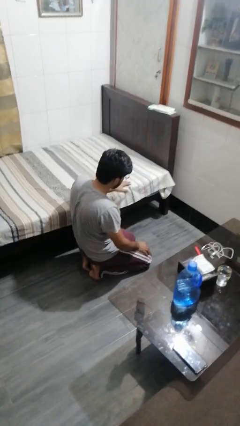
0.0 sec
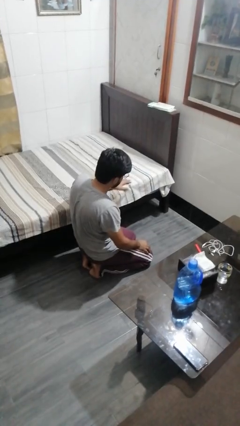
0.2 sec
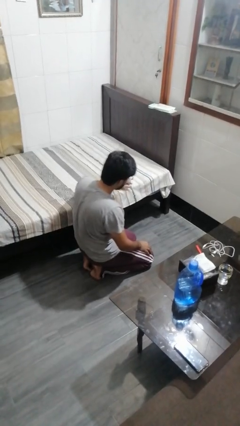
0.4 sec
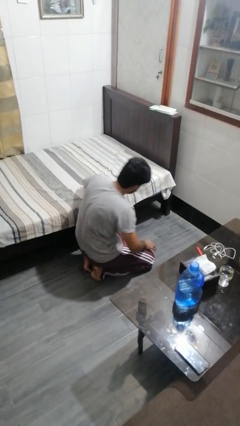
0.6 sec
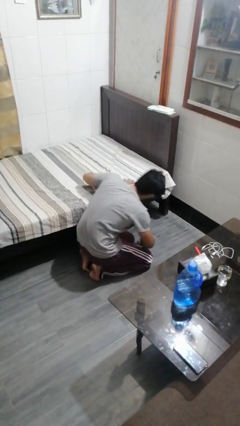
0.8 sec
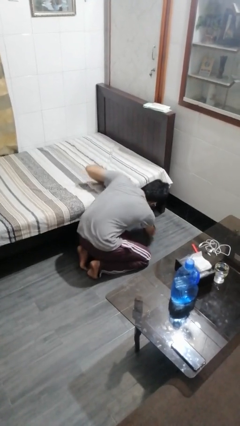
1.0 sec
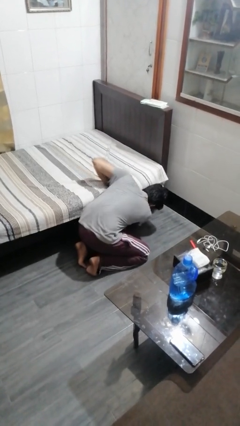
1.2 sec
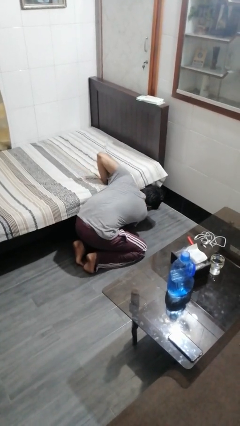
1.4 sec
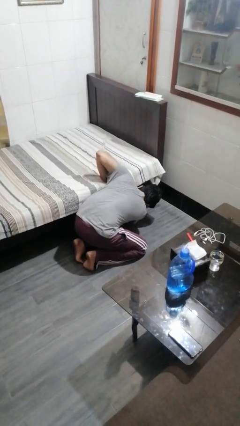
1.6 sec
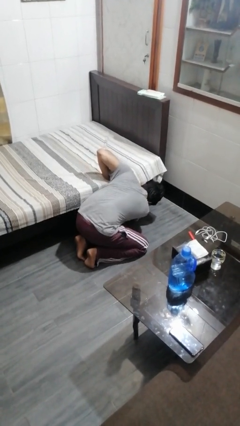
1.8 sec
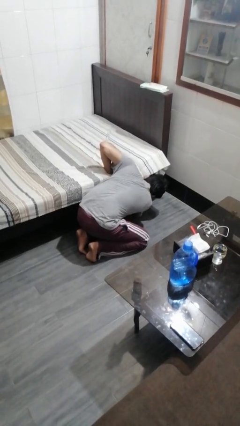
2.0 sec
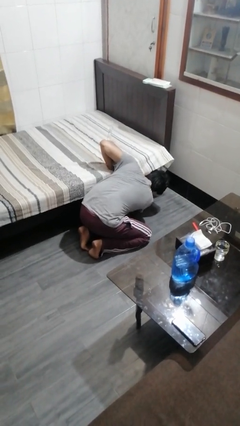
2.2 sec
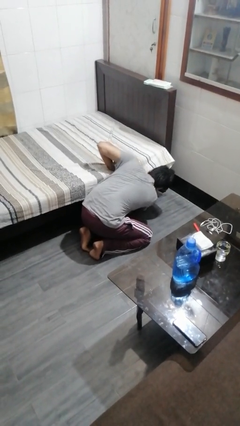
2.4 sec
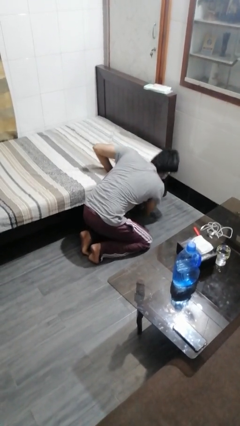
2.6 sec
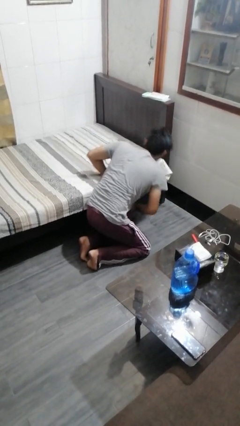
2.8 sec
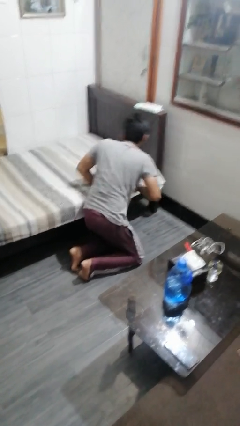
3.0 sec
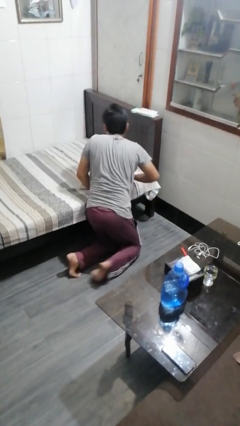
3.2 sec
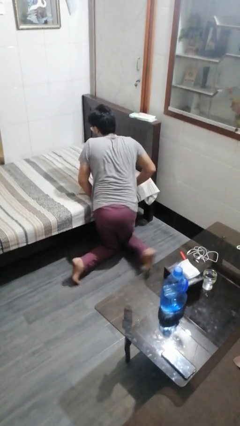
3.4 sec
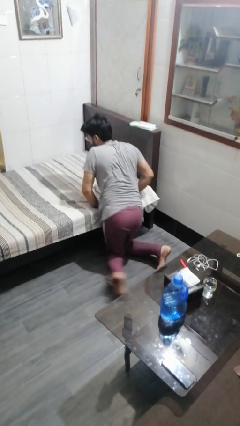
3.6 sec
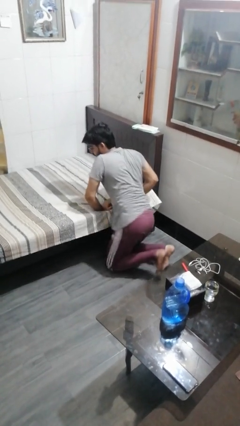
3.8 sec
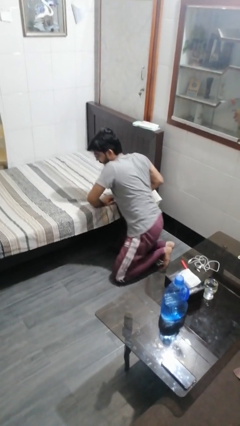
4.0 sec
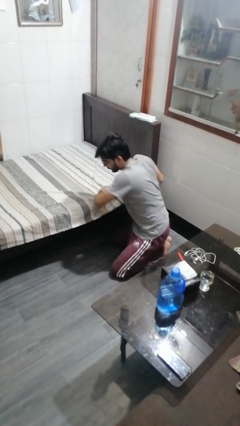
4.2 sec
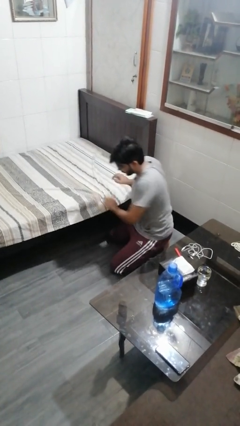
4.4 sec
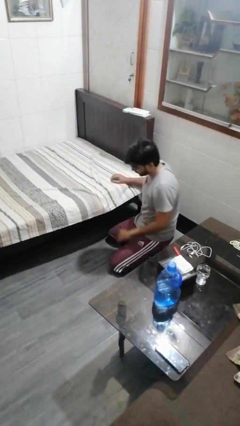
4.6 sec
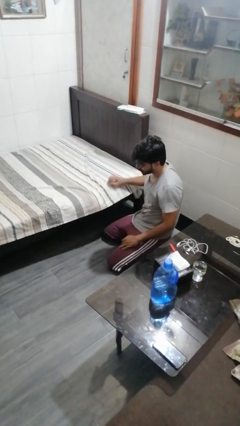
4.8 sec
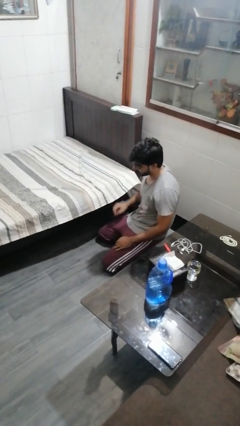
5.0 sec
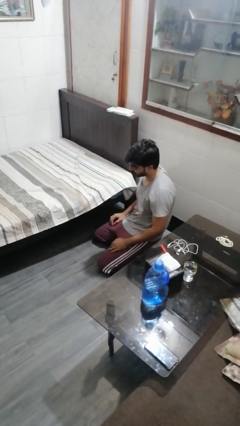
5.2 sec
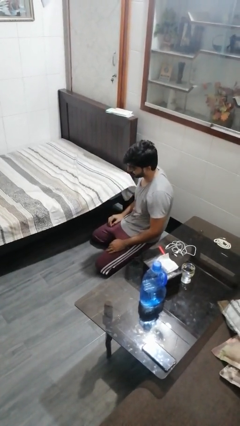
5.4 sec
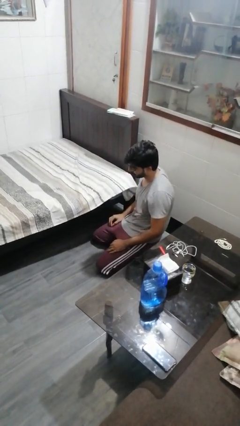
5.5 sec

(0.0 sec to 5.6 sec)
person searches under bed

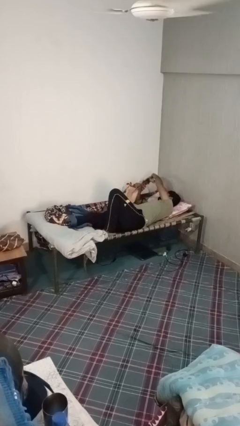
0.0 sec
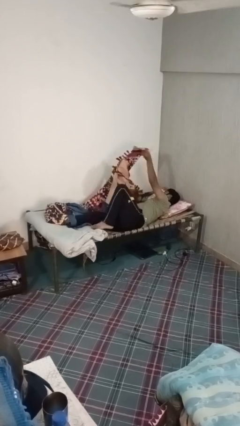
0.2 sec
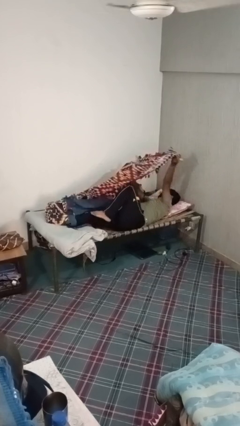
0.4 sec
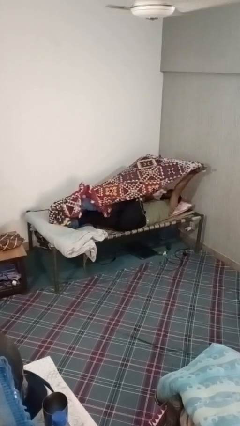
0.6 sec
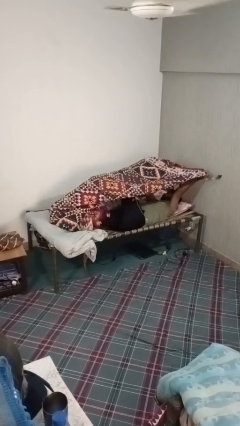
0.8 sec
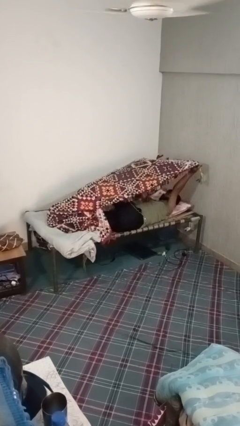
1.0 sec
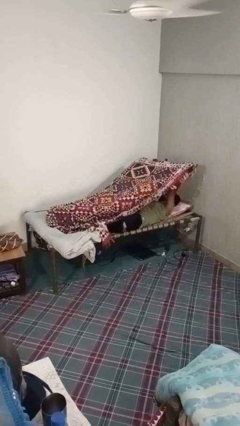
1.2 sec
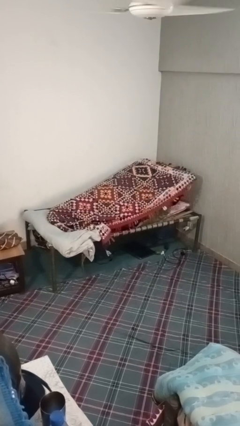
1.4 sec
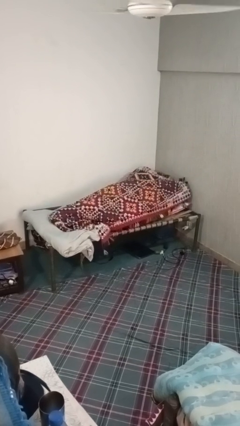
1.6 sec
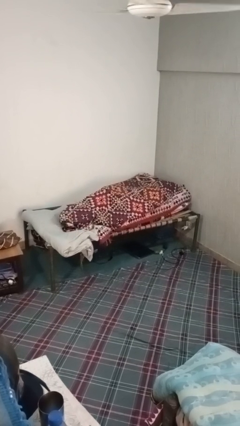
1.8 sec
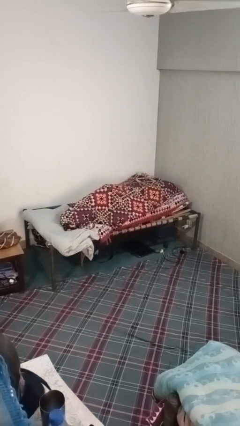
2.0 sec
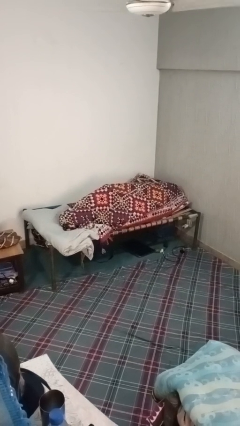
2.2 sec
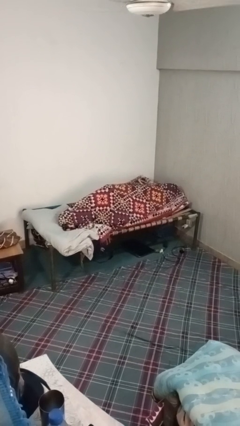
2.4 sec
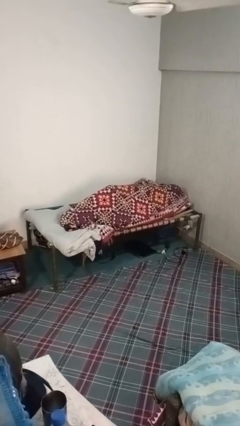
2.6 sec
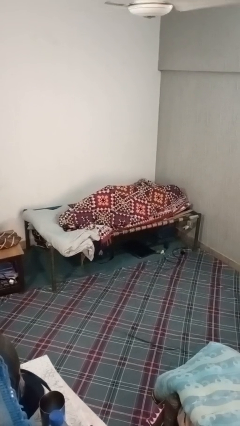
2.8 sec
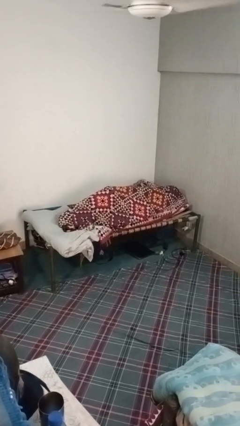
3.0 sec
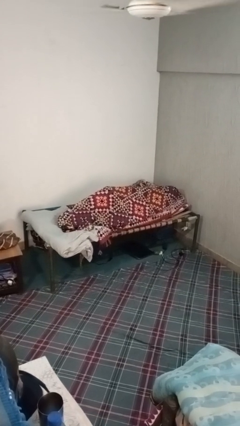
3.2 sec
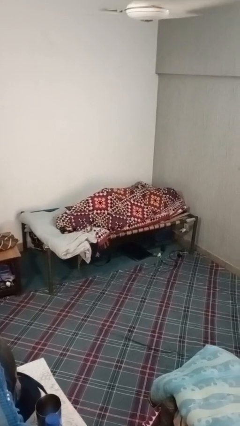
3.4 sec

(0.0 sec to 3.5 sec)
person covers with blanket

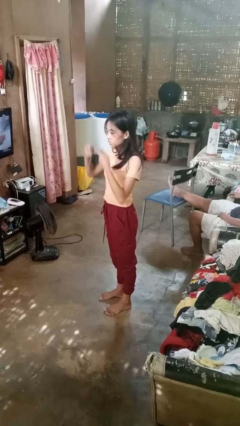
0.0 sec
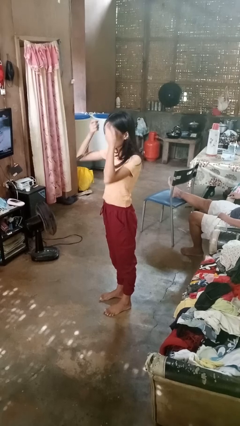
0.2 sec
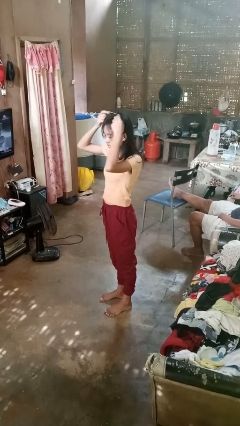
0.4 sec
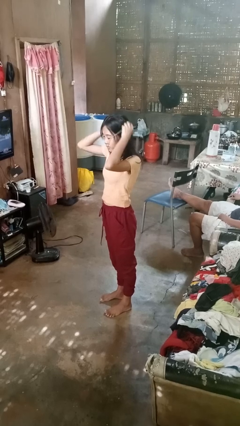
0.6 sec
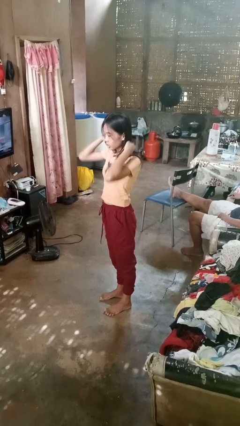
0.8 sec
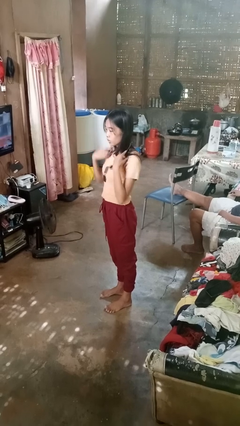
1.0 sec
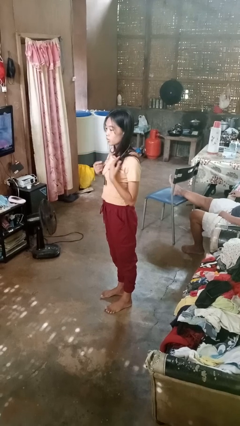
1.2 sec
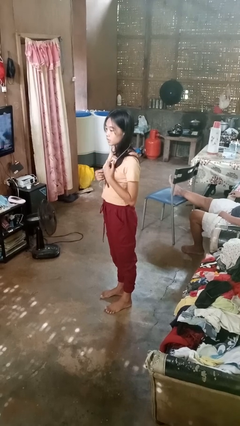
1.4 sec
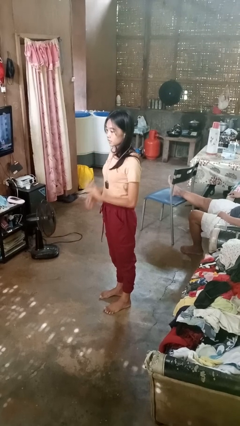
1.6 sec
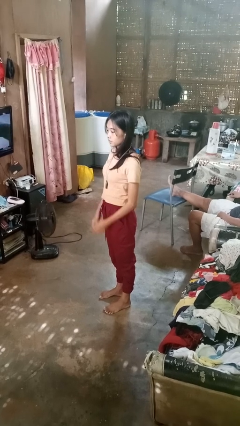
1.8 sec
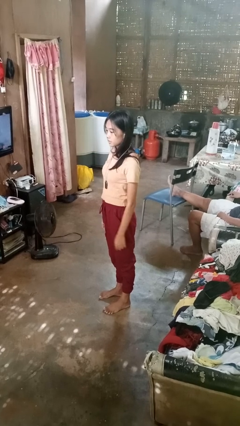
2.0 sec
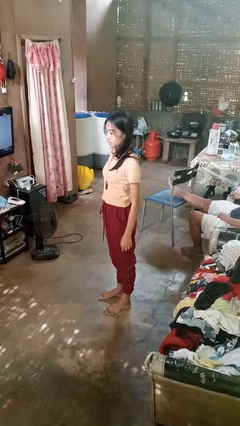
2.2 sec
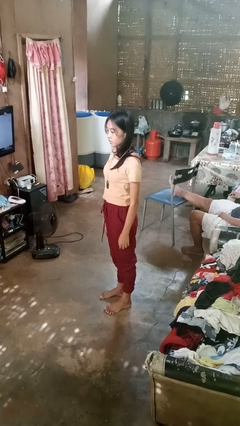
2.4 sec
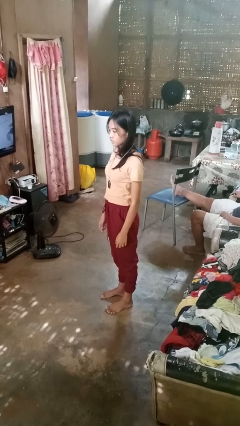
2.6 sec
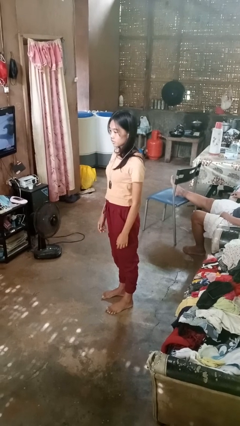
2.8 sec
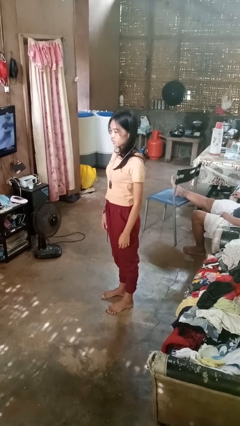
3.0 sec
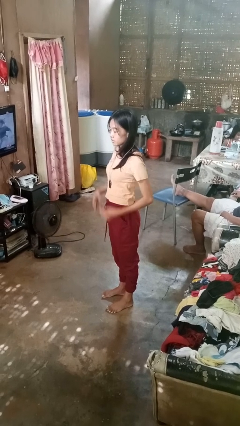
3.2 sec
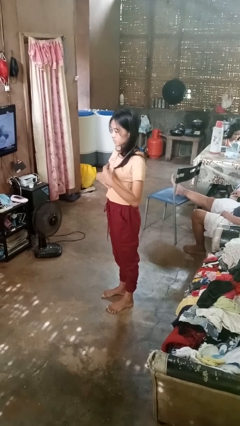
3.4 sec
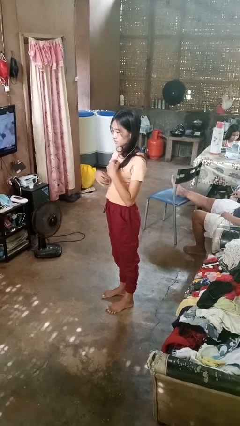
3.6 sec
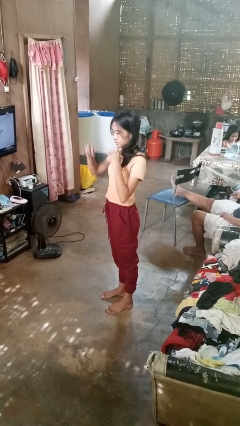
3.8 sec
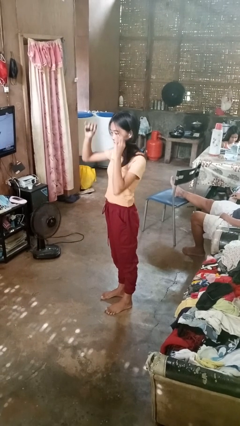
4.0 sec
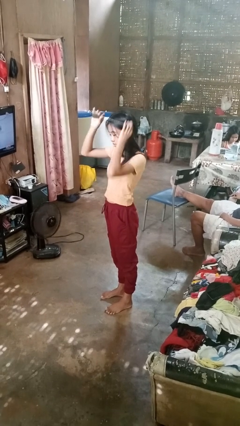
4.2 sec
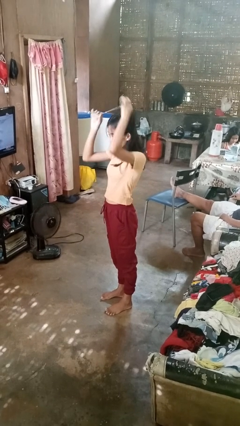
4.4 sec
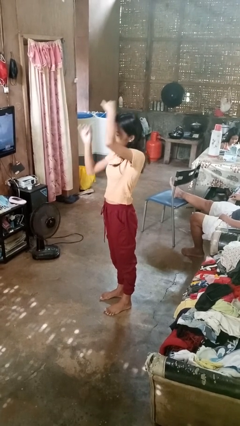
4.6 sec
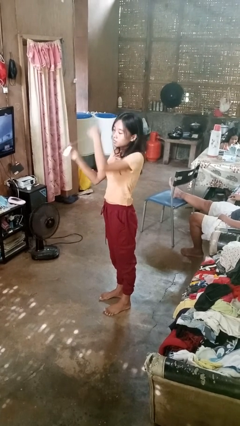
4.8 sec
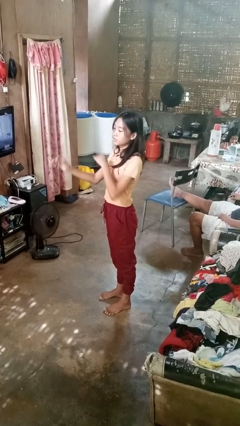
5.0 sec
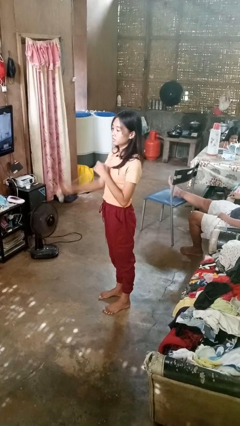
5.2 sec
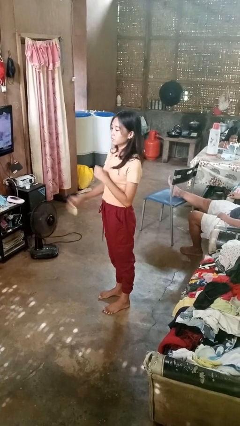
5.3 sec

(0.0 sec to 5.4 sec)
person puts on belt

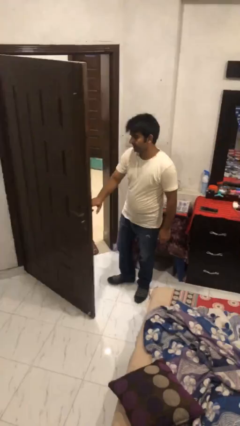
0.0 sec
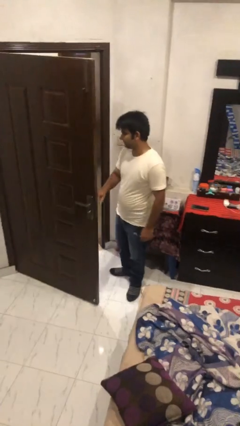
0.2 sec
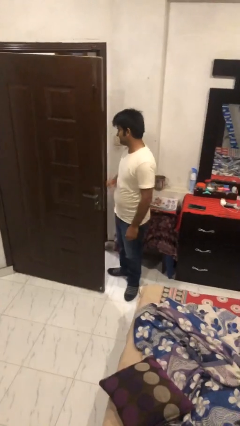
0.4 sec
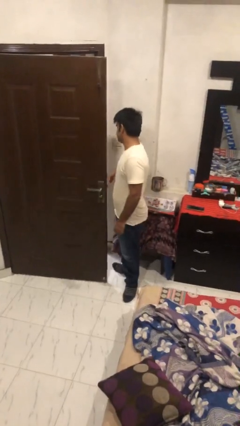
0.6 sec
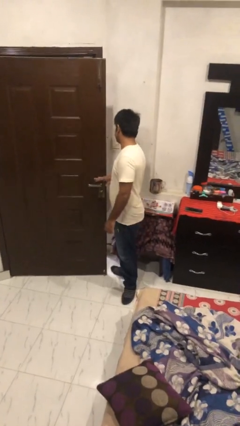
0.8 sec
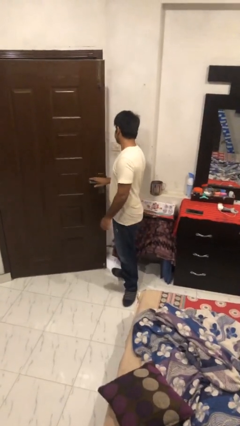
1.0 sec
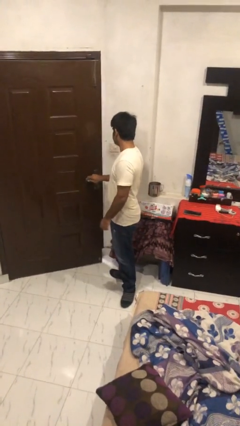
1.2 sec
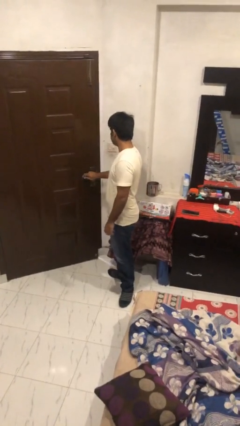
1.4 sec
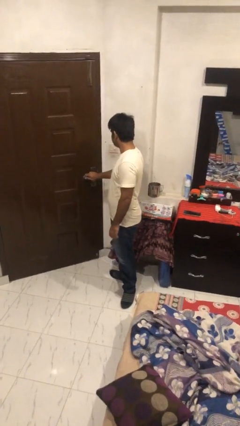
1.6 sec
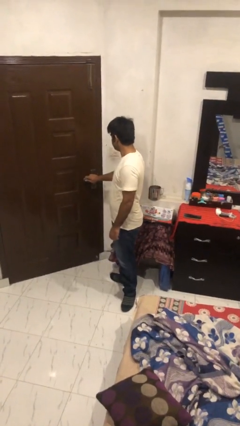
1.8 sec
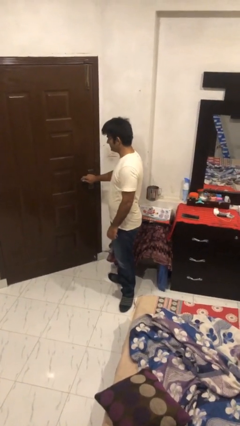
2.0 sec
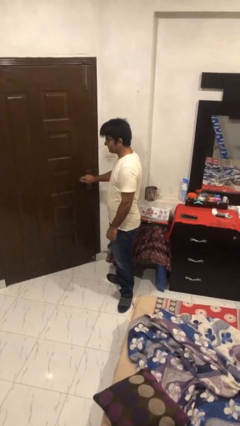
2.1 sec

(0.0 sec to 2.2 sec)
person closes facility door

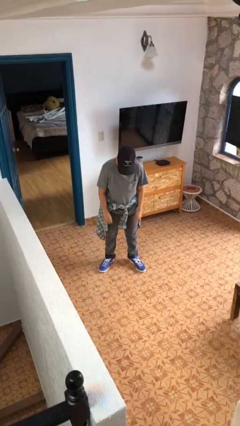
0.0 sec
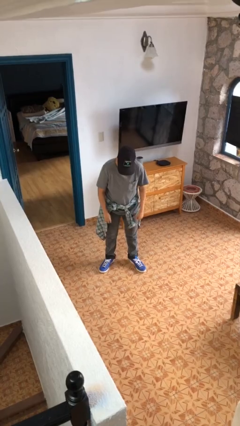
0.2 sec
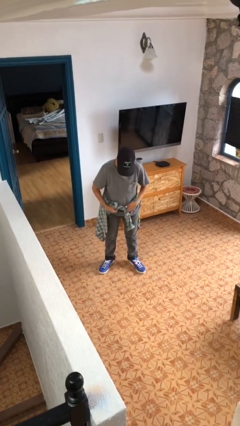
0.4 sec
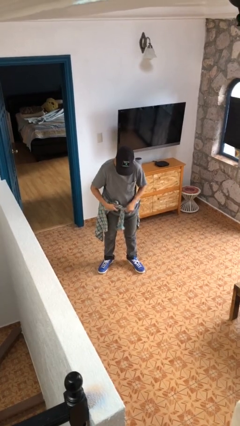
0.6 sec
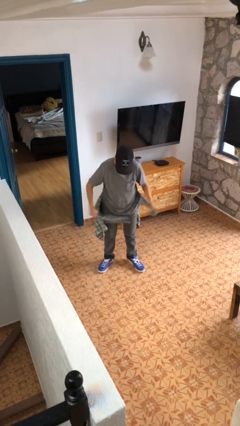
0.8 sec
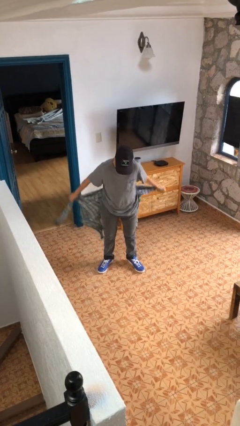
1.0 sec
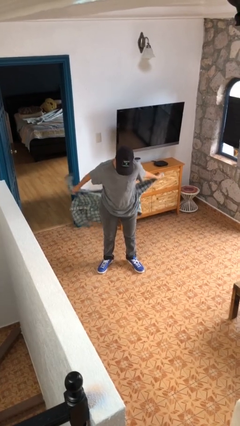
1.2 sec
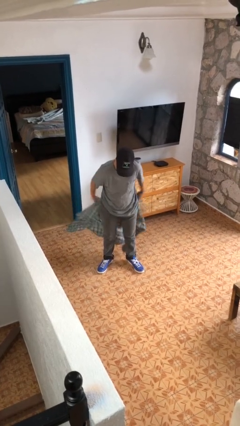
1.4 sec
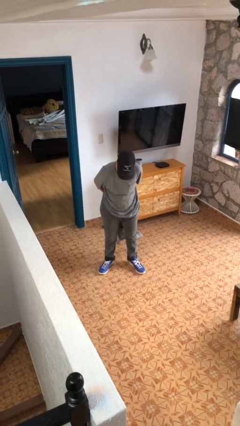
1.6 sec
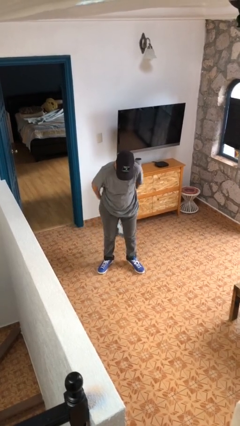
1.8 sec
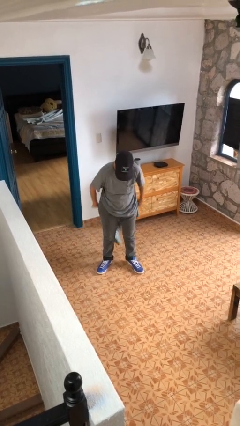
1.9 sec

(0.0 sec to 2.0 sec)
person unties jacket around waist
